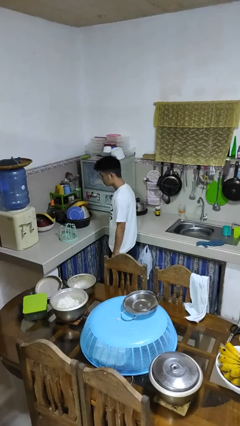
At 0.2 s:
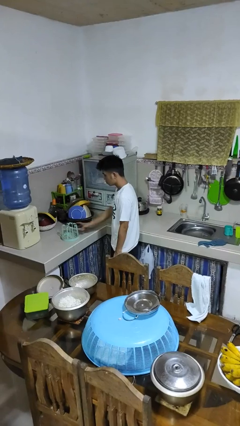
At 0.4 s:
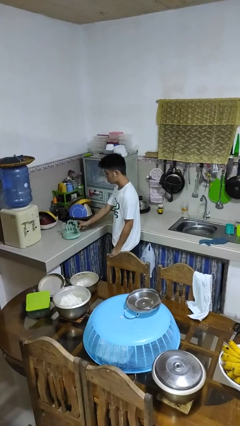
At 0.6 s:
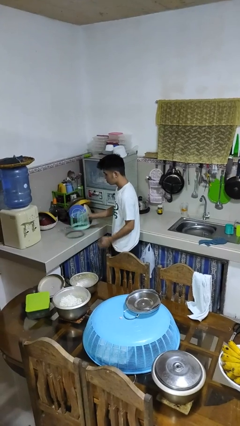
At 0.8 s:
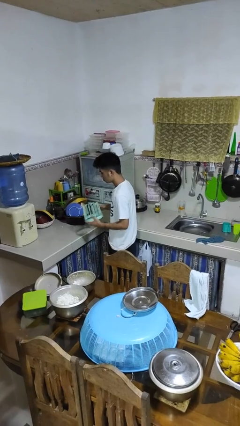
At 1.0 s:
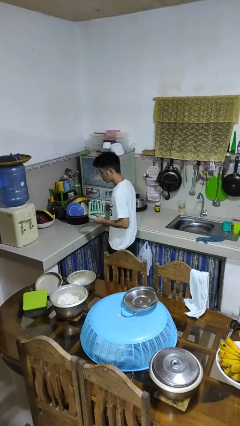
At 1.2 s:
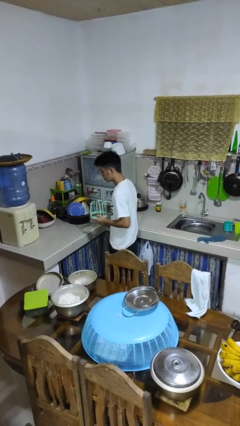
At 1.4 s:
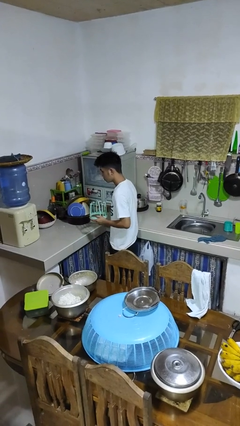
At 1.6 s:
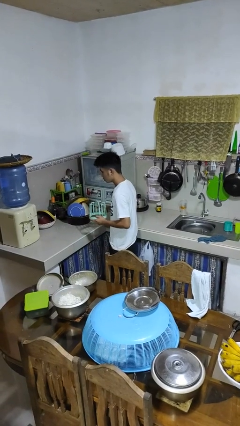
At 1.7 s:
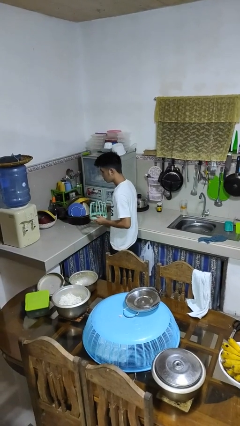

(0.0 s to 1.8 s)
person picks up object from countertop

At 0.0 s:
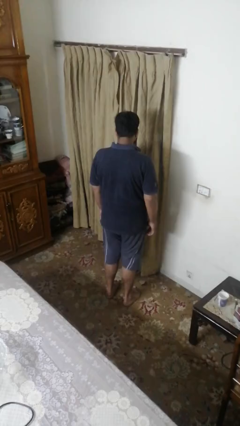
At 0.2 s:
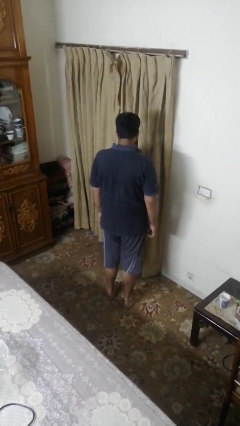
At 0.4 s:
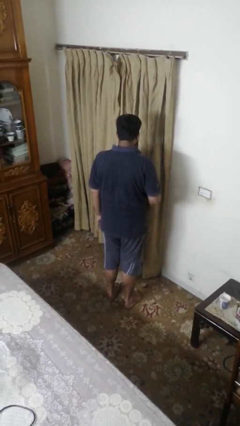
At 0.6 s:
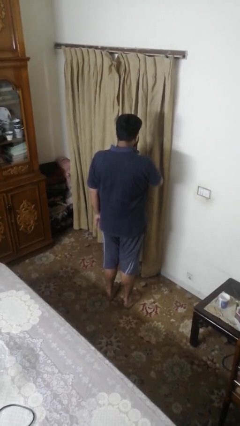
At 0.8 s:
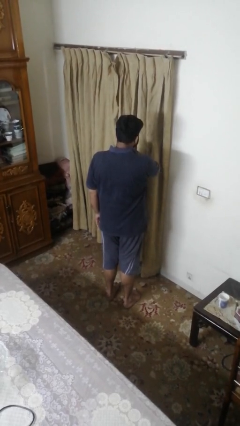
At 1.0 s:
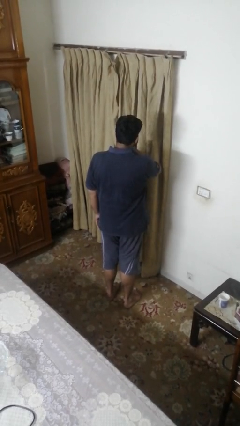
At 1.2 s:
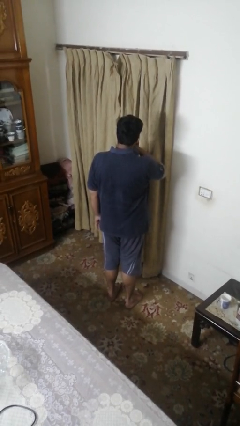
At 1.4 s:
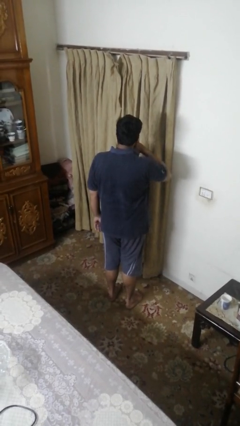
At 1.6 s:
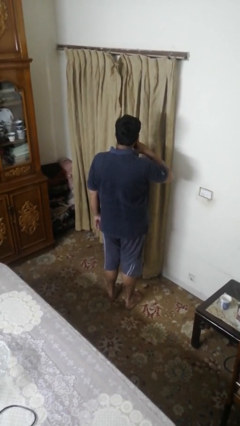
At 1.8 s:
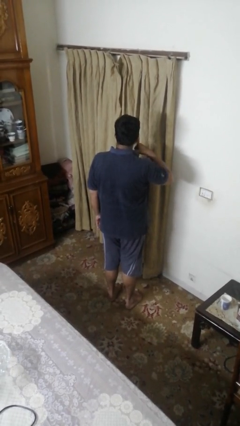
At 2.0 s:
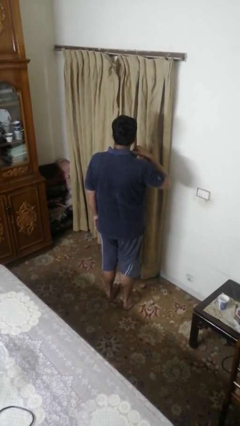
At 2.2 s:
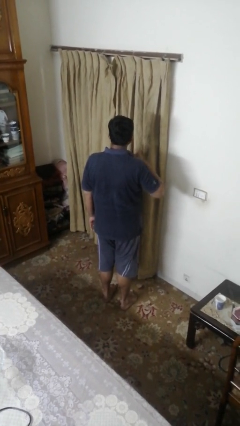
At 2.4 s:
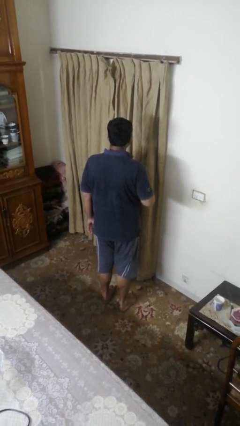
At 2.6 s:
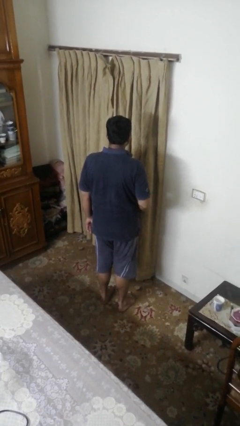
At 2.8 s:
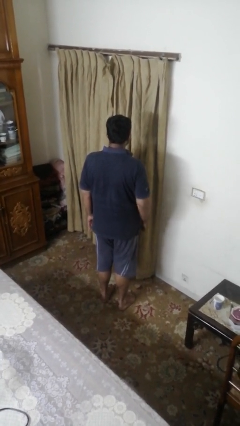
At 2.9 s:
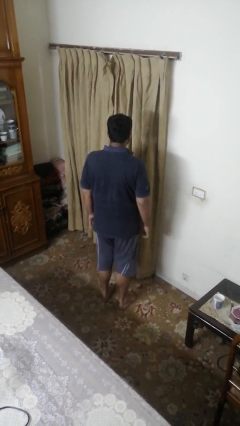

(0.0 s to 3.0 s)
person gestures cut

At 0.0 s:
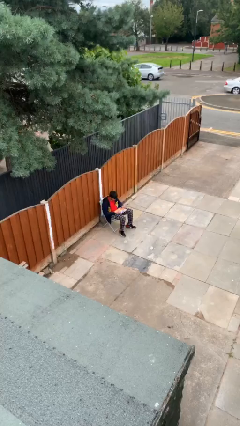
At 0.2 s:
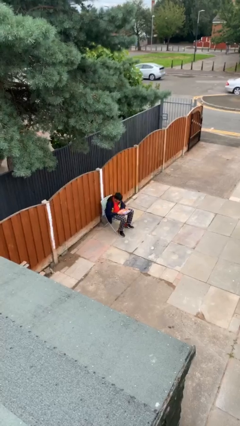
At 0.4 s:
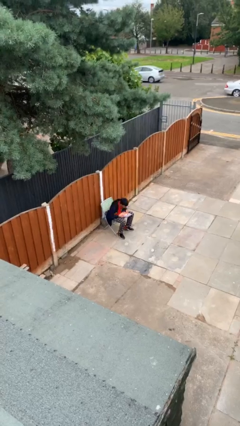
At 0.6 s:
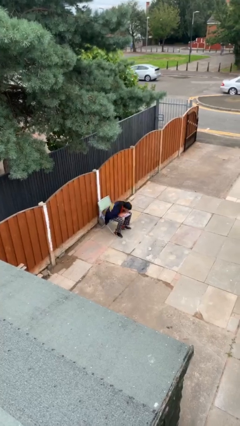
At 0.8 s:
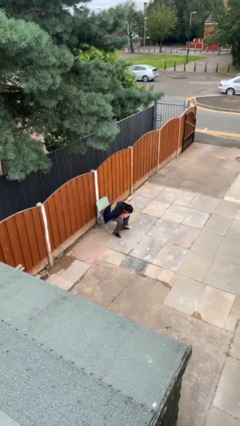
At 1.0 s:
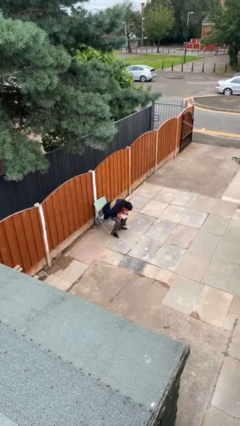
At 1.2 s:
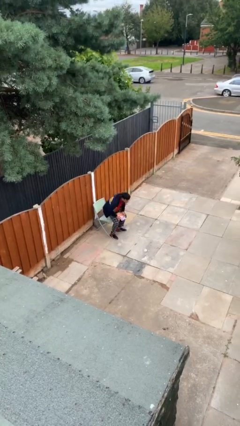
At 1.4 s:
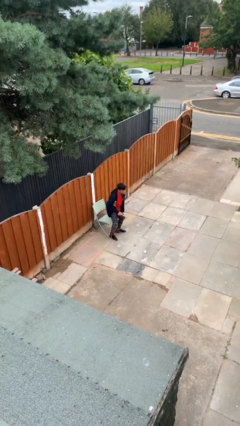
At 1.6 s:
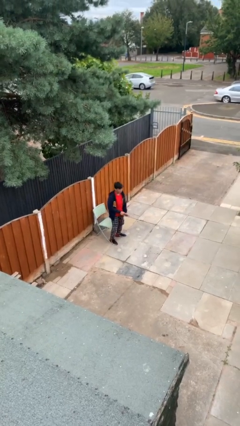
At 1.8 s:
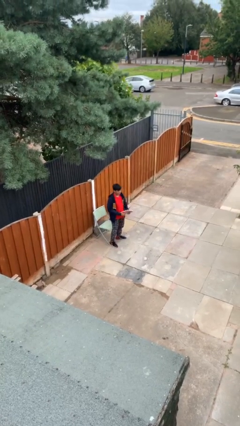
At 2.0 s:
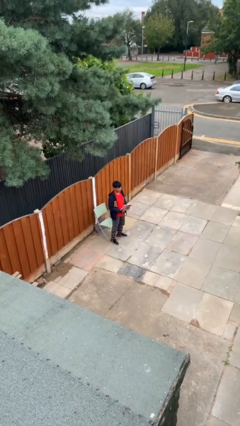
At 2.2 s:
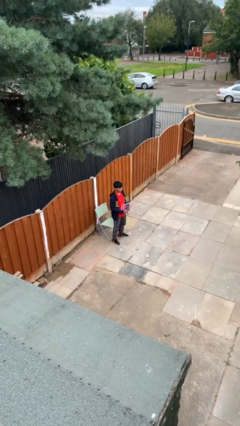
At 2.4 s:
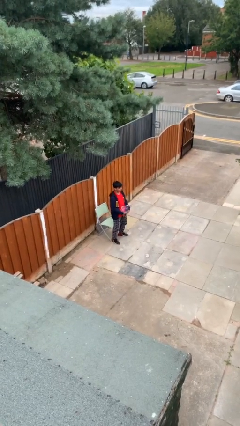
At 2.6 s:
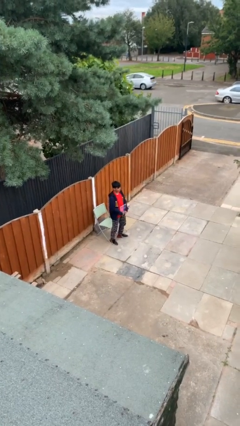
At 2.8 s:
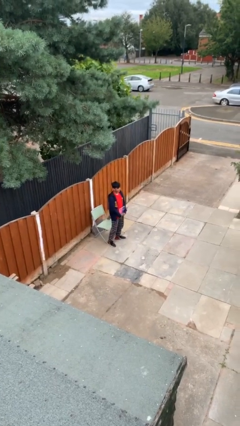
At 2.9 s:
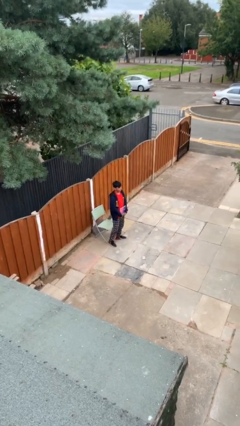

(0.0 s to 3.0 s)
person stands up

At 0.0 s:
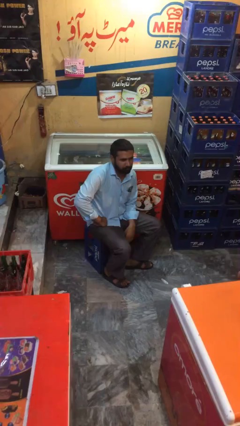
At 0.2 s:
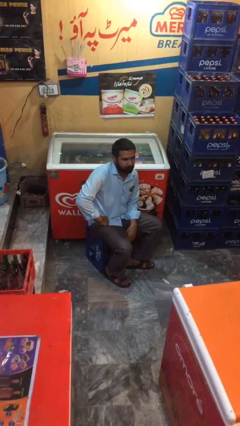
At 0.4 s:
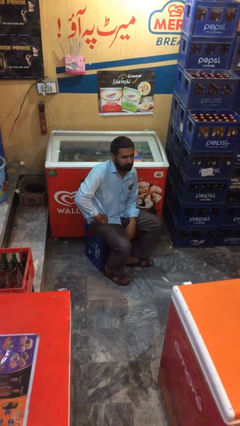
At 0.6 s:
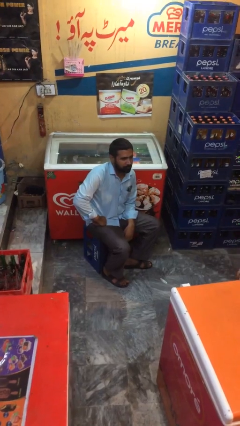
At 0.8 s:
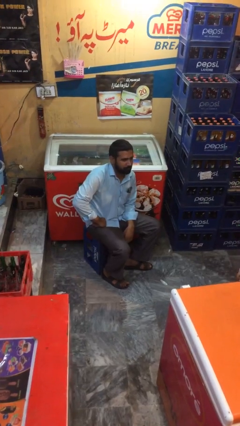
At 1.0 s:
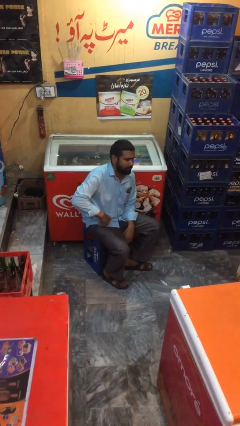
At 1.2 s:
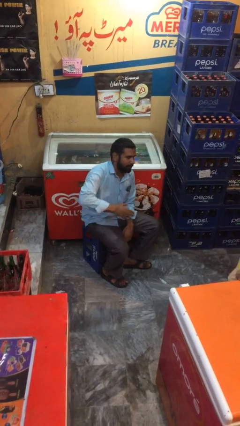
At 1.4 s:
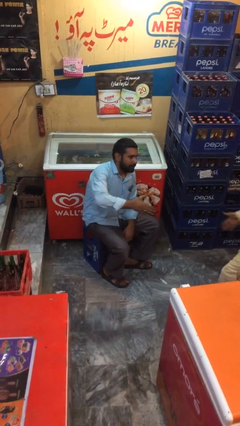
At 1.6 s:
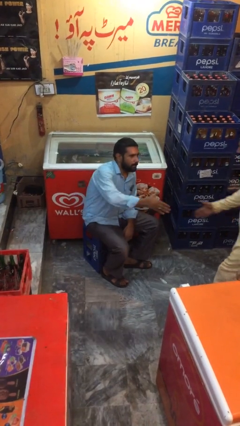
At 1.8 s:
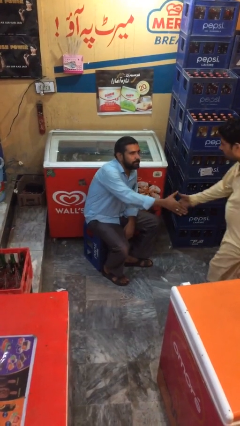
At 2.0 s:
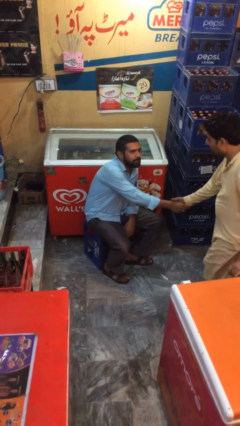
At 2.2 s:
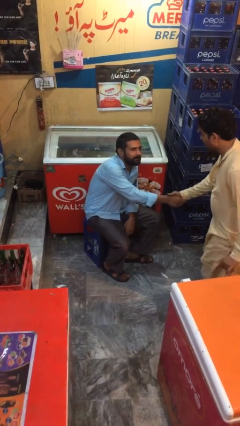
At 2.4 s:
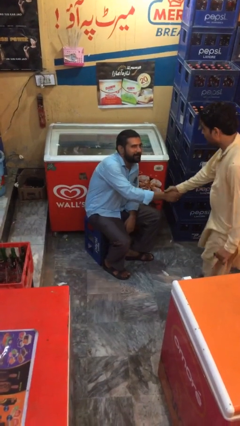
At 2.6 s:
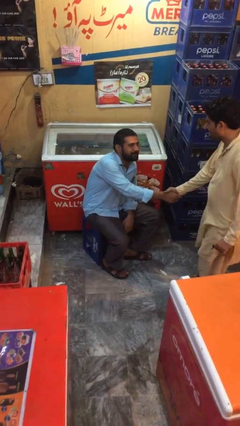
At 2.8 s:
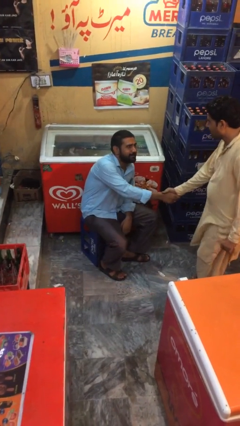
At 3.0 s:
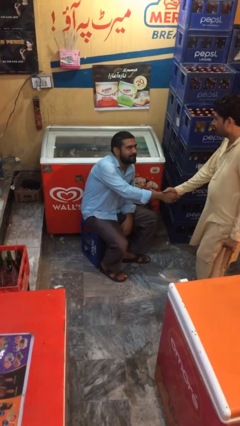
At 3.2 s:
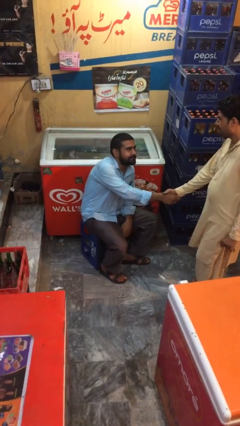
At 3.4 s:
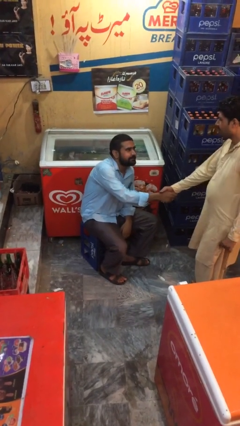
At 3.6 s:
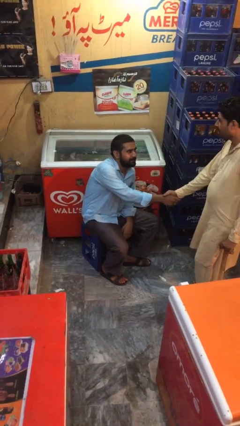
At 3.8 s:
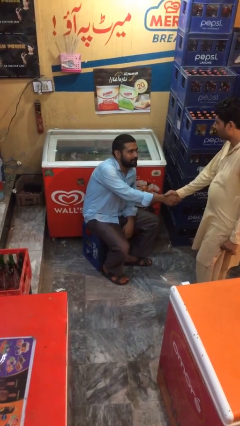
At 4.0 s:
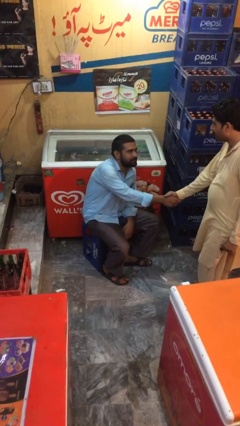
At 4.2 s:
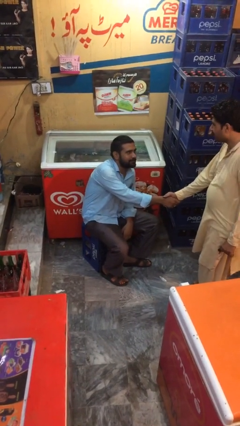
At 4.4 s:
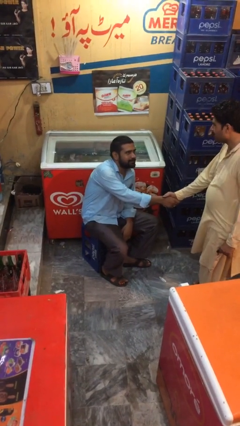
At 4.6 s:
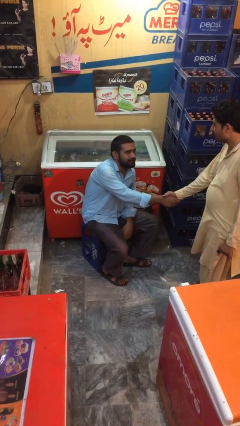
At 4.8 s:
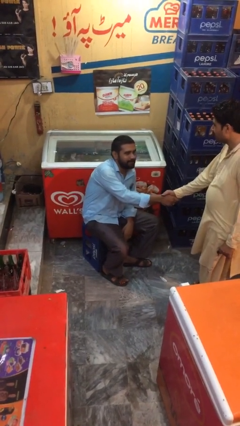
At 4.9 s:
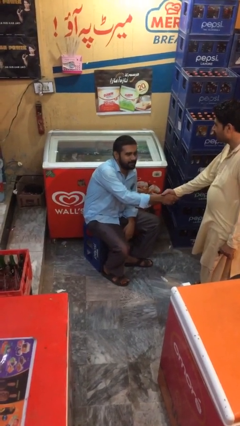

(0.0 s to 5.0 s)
person shakes hand

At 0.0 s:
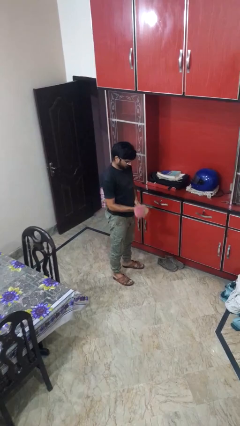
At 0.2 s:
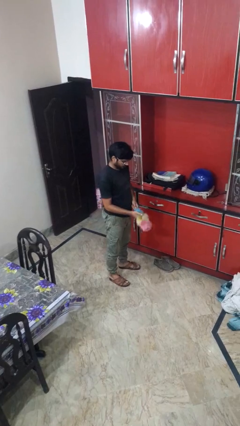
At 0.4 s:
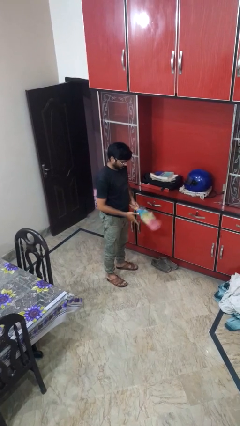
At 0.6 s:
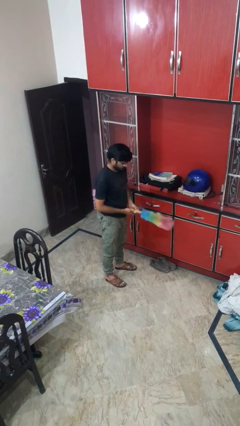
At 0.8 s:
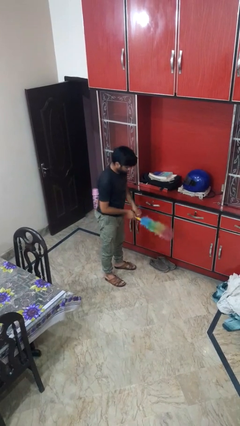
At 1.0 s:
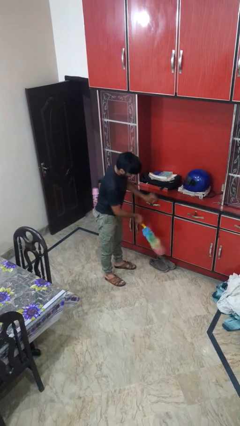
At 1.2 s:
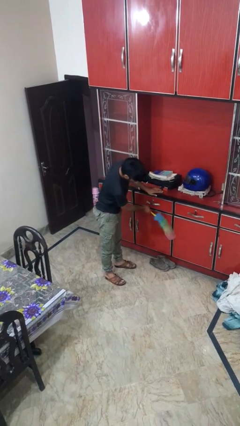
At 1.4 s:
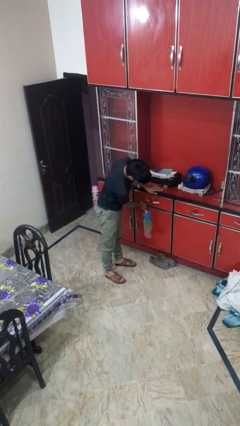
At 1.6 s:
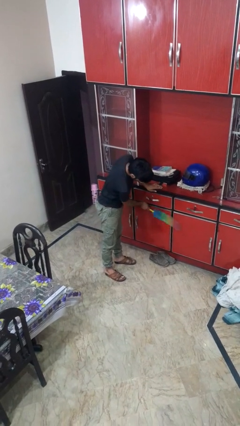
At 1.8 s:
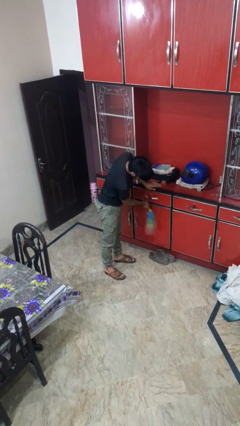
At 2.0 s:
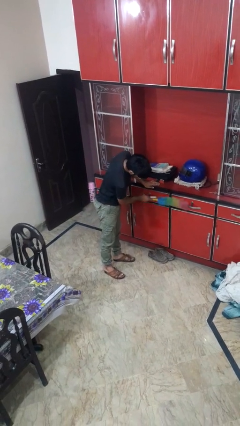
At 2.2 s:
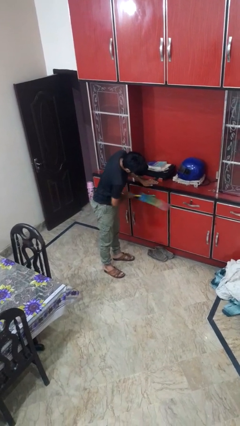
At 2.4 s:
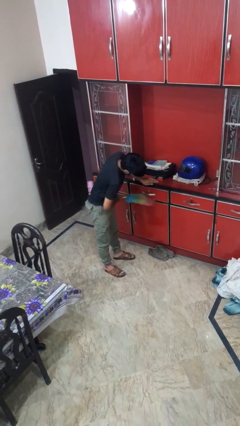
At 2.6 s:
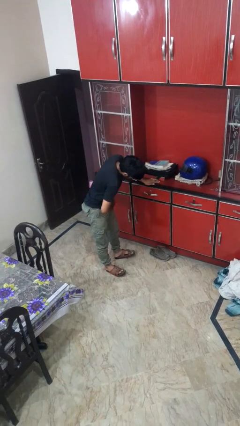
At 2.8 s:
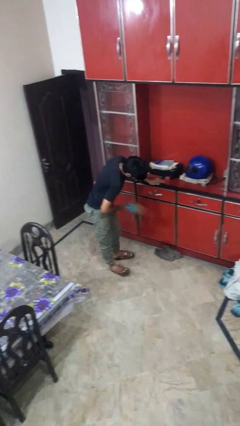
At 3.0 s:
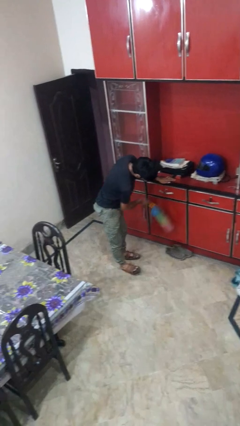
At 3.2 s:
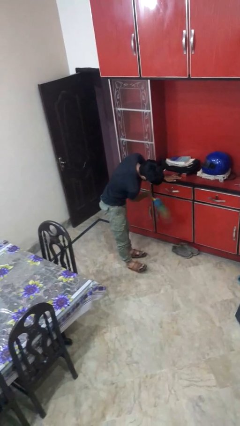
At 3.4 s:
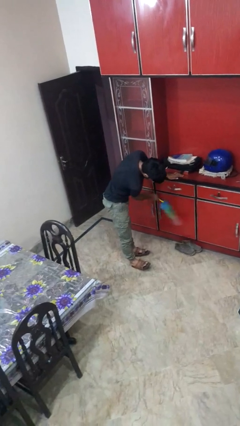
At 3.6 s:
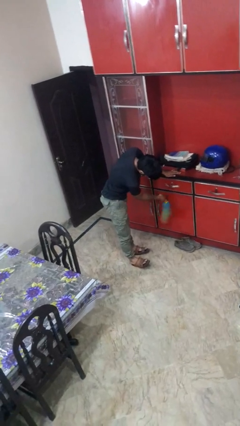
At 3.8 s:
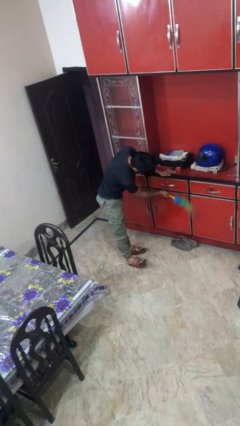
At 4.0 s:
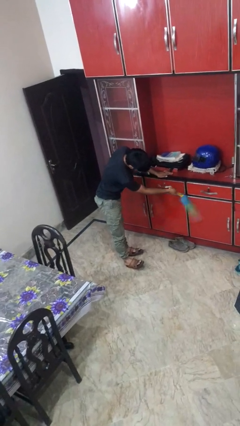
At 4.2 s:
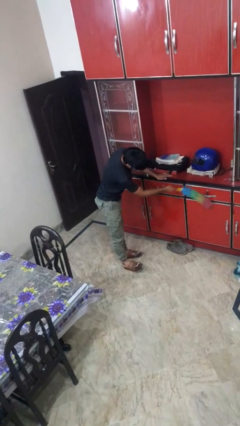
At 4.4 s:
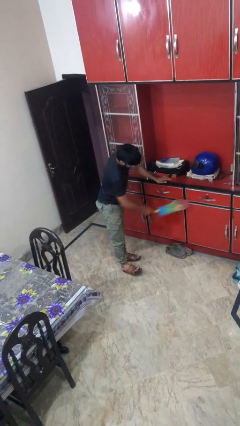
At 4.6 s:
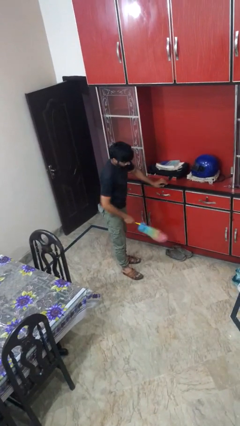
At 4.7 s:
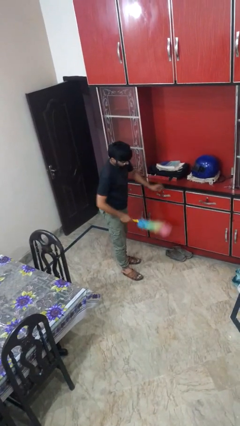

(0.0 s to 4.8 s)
person dusts furniture
